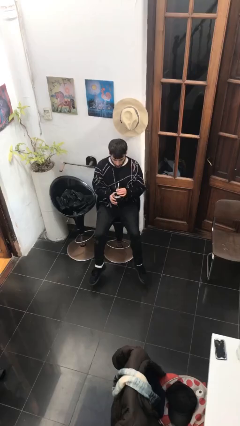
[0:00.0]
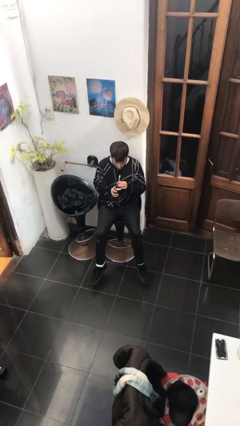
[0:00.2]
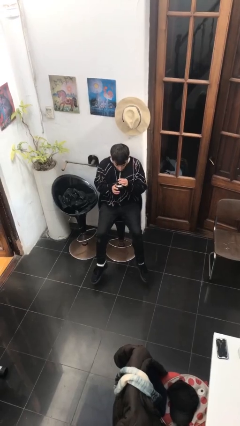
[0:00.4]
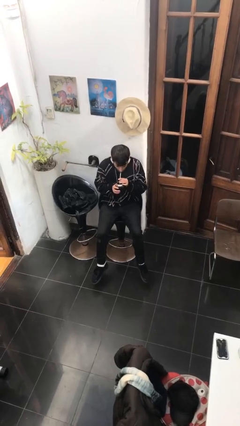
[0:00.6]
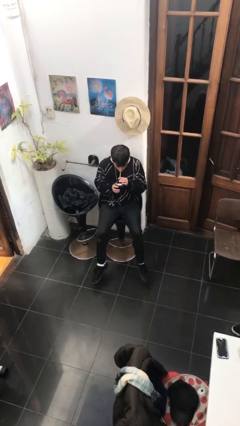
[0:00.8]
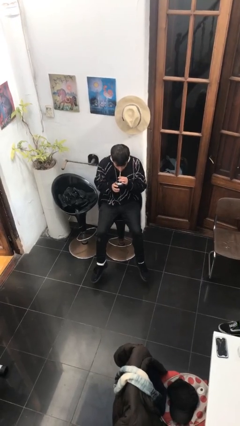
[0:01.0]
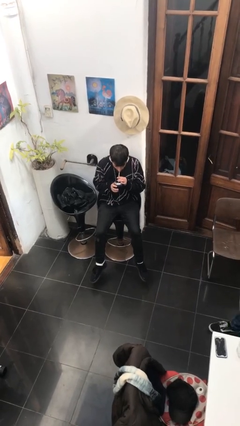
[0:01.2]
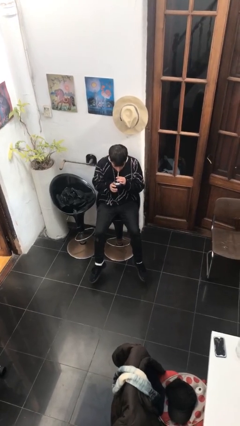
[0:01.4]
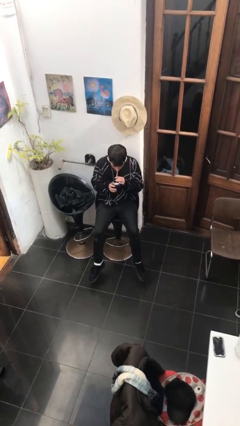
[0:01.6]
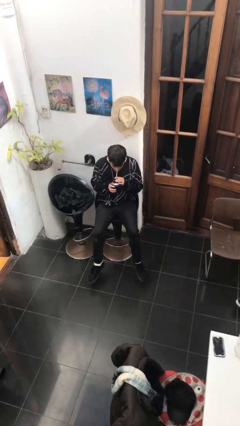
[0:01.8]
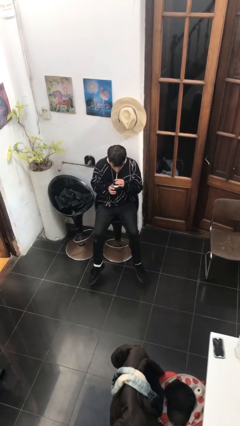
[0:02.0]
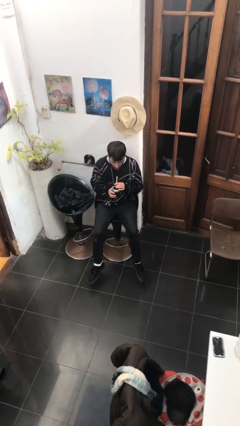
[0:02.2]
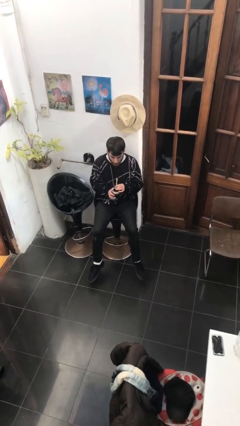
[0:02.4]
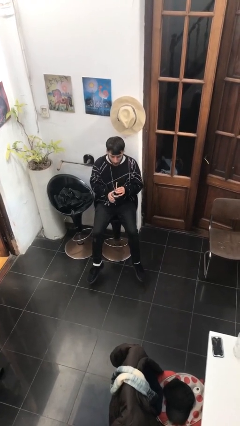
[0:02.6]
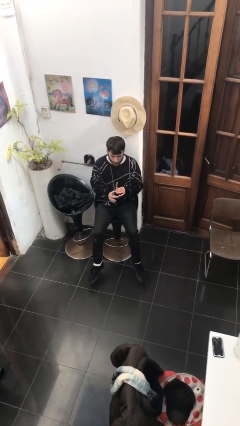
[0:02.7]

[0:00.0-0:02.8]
person drinks from straw

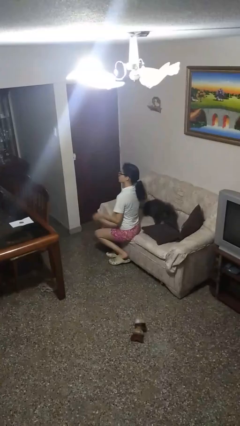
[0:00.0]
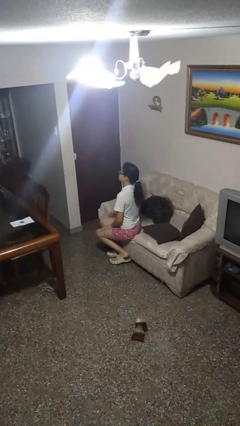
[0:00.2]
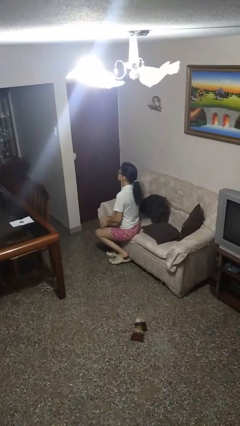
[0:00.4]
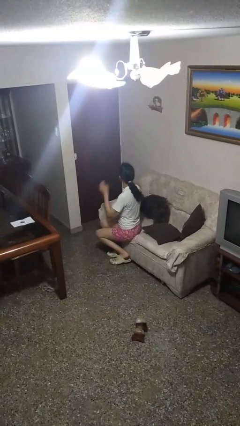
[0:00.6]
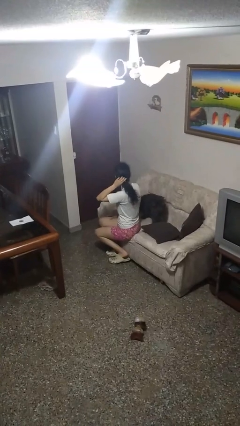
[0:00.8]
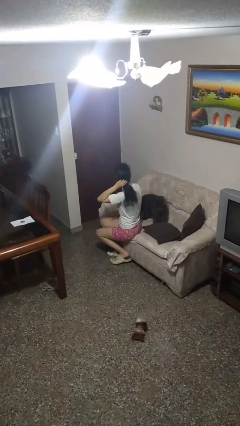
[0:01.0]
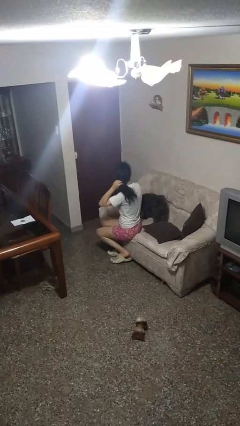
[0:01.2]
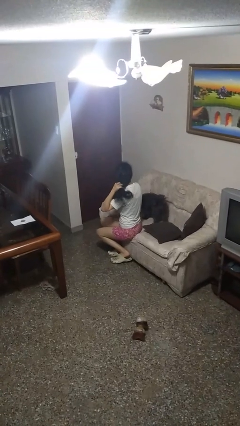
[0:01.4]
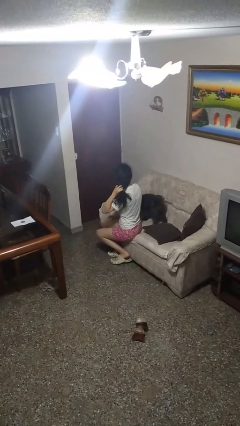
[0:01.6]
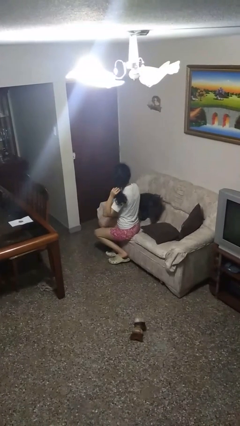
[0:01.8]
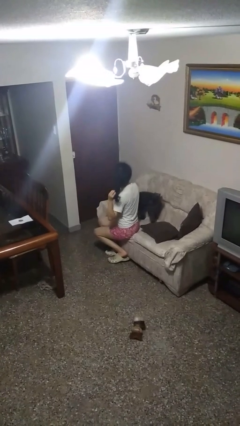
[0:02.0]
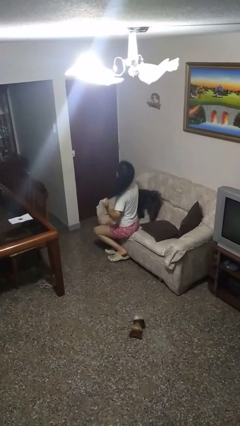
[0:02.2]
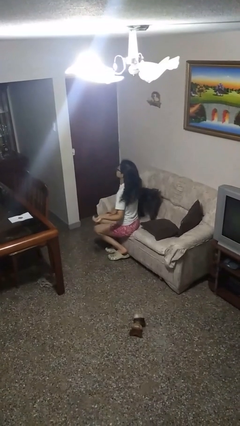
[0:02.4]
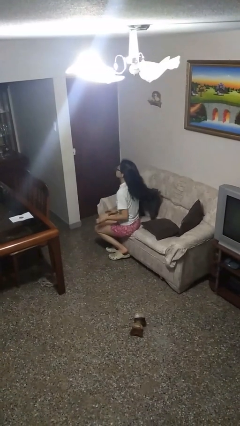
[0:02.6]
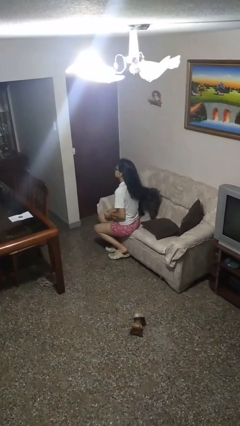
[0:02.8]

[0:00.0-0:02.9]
person takes off hairtie

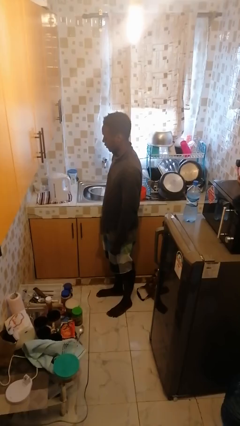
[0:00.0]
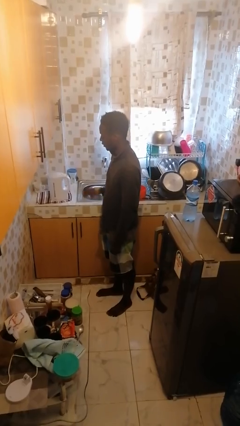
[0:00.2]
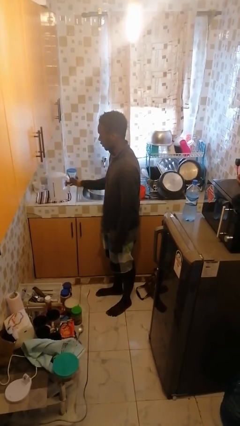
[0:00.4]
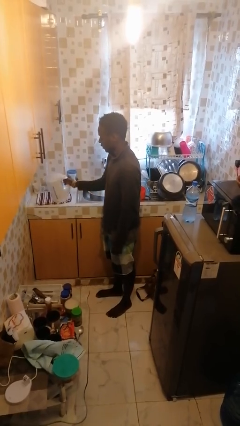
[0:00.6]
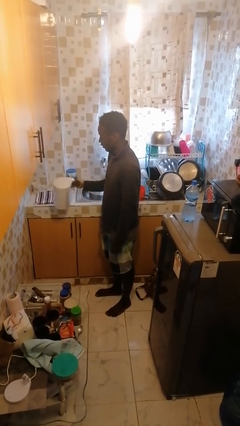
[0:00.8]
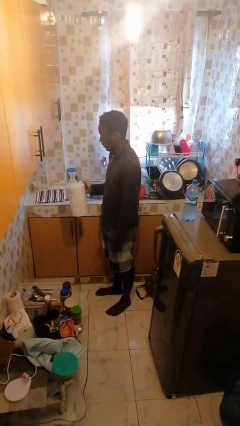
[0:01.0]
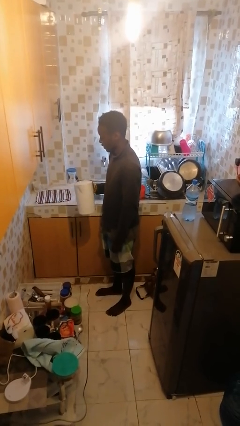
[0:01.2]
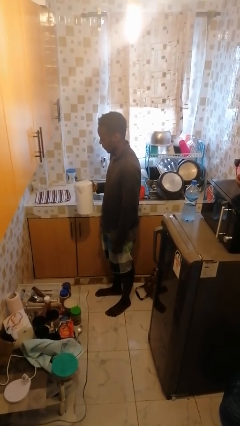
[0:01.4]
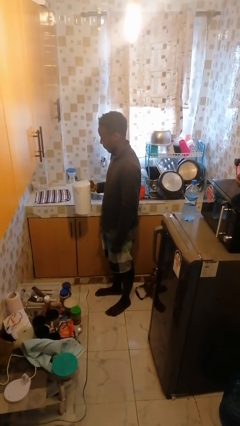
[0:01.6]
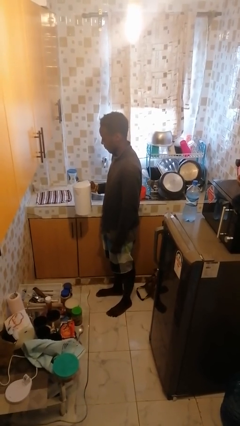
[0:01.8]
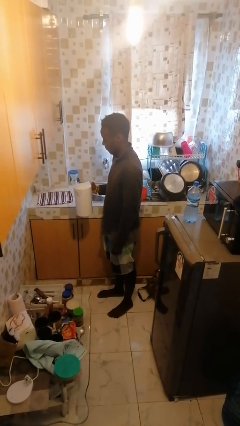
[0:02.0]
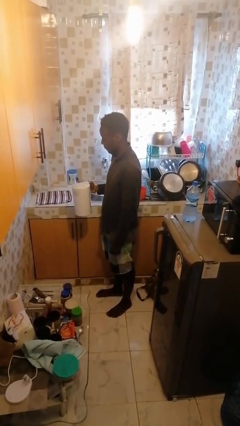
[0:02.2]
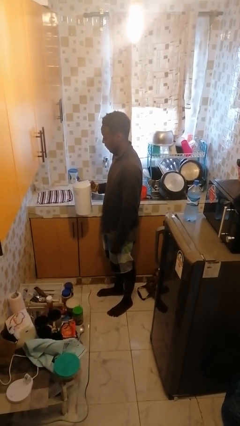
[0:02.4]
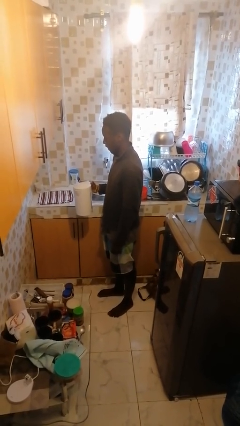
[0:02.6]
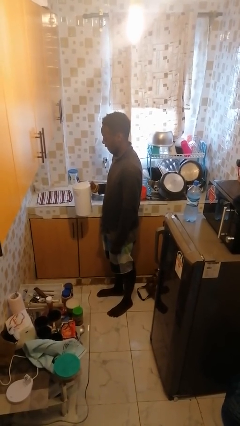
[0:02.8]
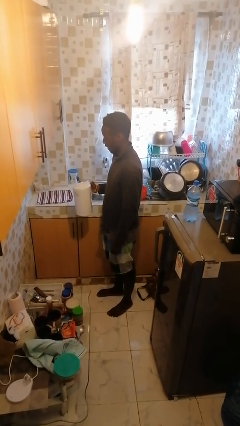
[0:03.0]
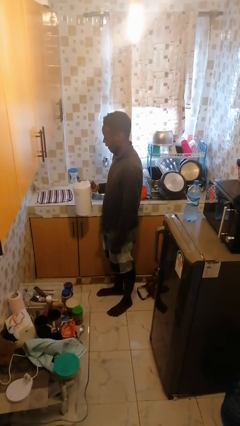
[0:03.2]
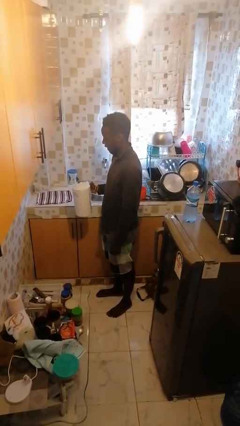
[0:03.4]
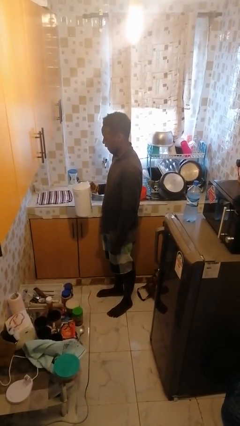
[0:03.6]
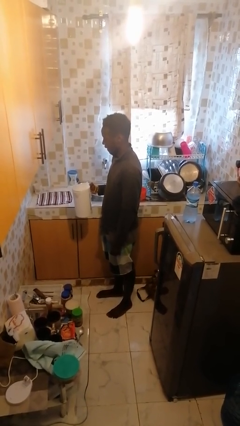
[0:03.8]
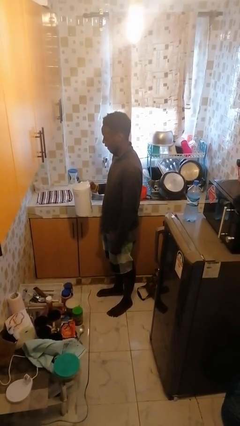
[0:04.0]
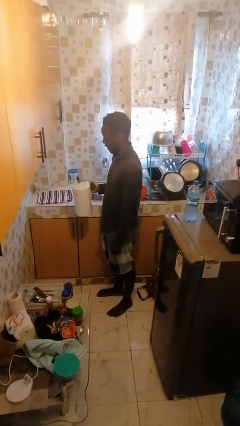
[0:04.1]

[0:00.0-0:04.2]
person picks up object from countertop

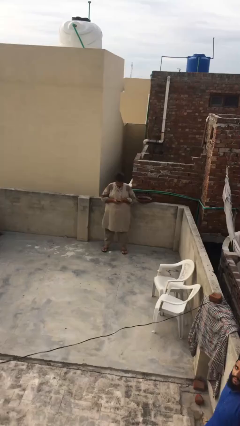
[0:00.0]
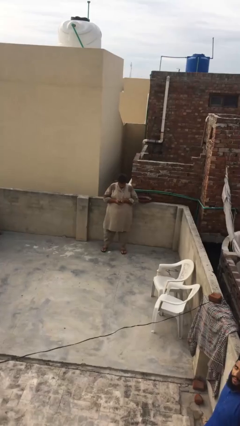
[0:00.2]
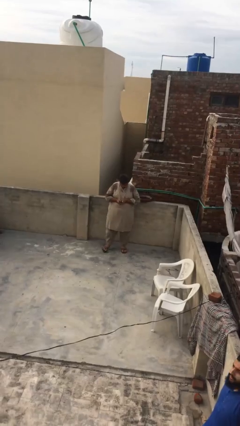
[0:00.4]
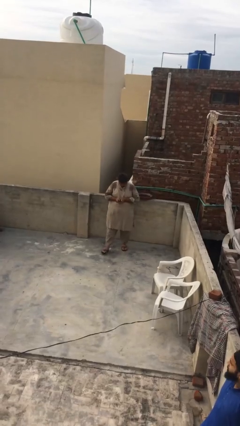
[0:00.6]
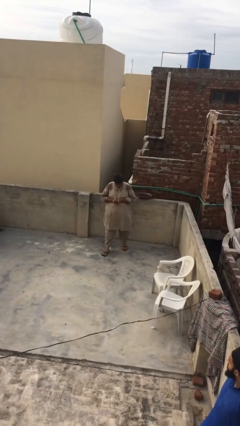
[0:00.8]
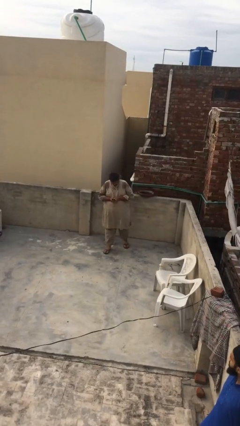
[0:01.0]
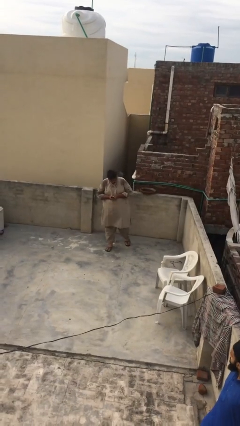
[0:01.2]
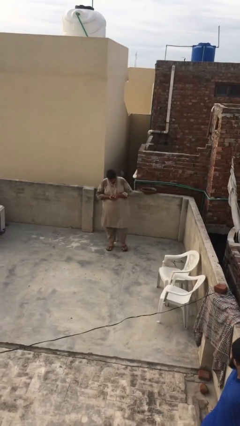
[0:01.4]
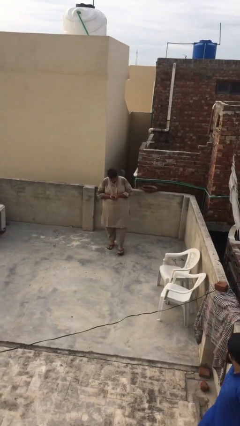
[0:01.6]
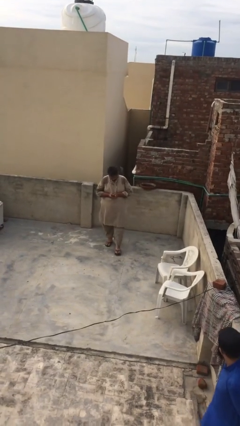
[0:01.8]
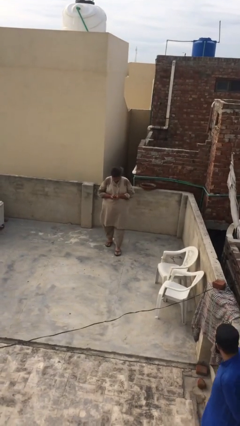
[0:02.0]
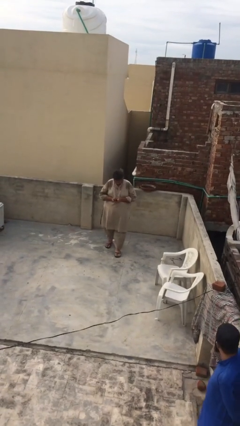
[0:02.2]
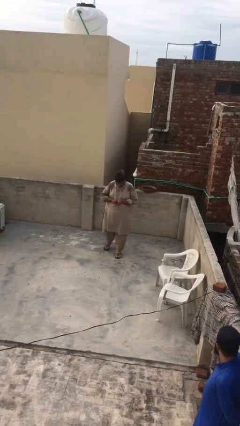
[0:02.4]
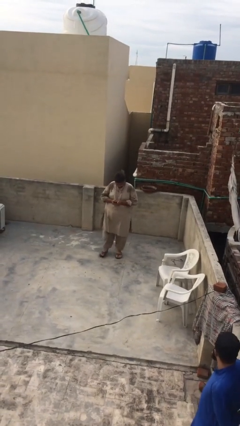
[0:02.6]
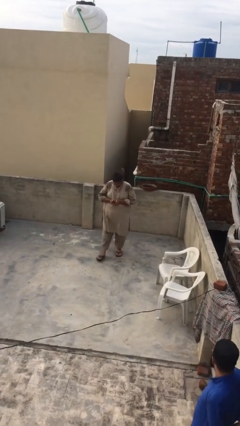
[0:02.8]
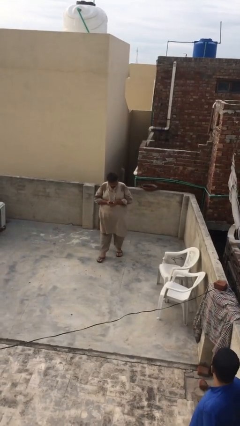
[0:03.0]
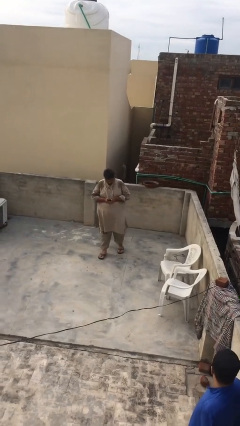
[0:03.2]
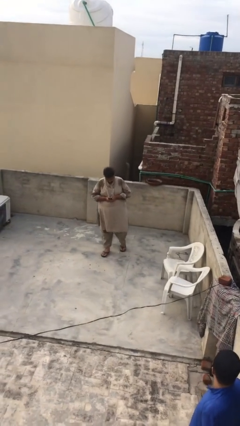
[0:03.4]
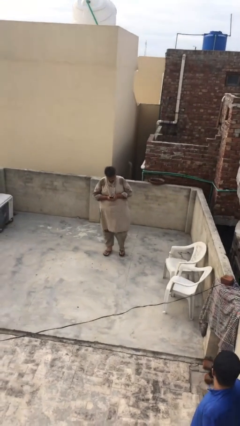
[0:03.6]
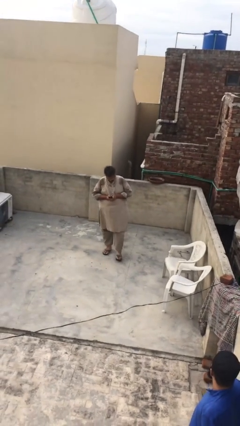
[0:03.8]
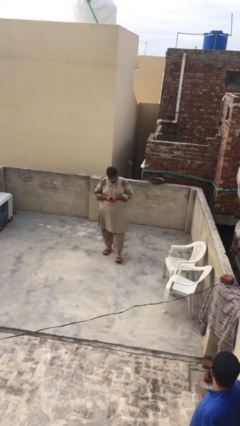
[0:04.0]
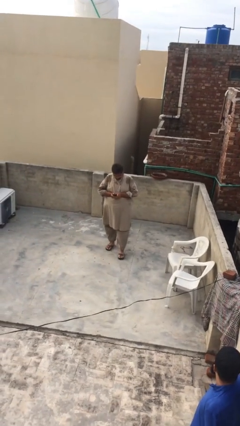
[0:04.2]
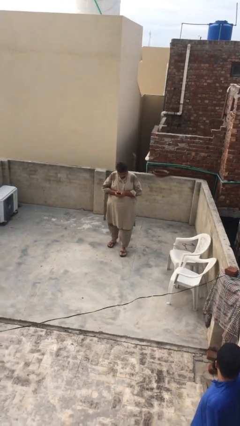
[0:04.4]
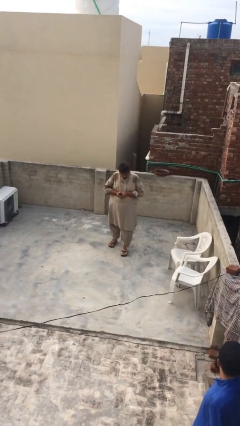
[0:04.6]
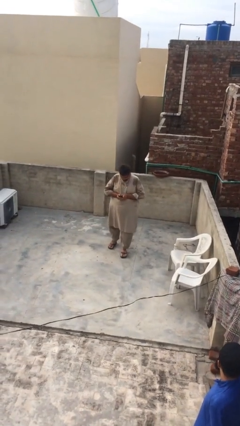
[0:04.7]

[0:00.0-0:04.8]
person texts on phone

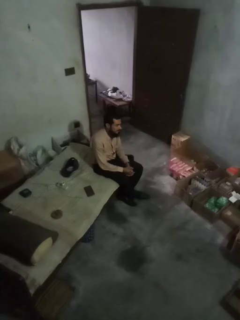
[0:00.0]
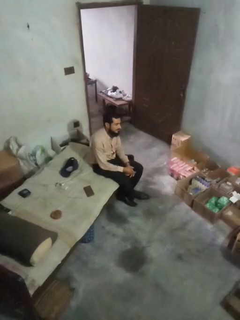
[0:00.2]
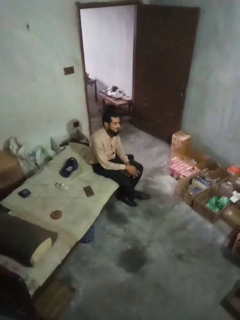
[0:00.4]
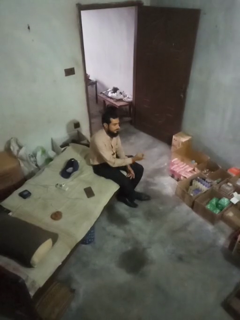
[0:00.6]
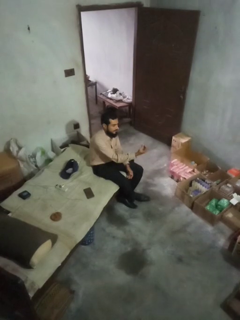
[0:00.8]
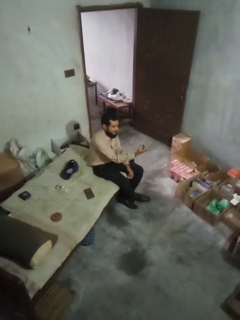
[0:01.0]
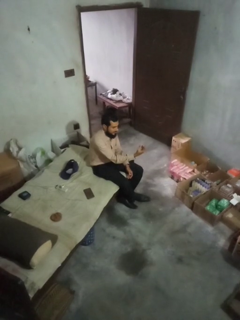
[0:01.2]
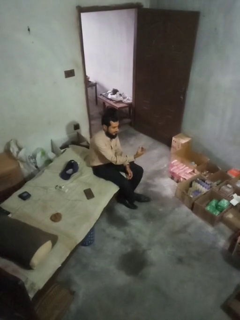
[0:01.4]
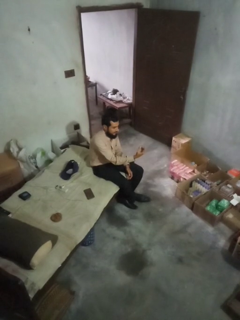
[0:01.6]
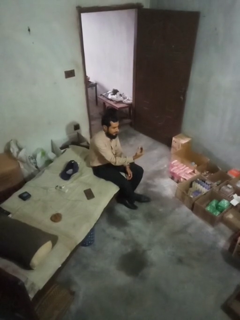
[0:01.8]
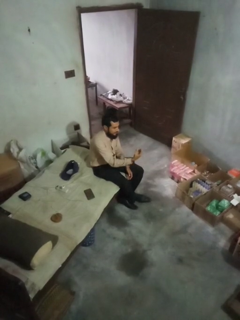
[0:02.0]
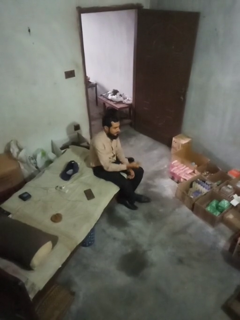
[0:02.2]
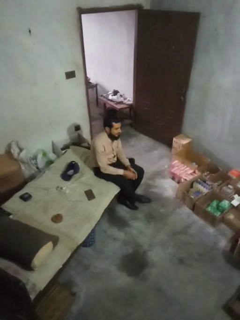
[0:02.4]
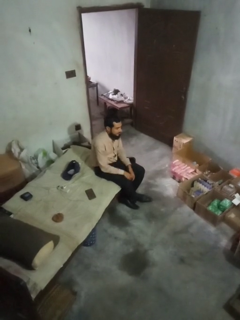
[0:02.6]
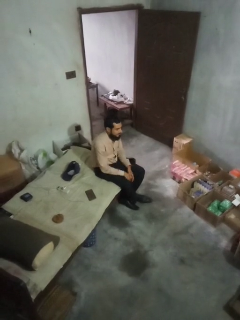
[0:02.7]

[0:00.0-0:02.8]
person gestures come here

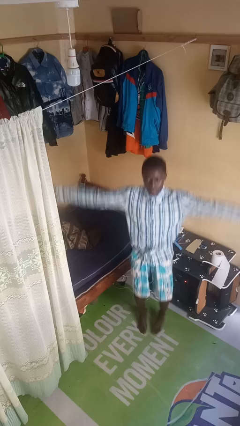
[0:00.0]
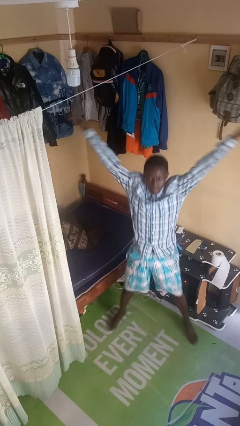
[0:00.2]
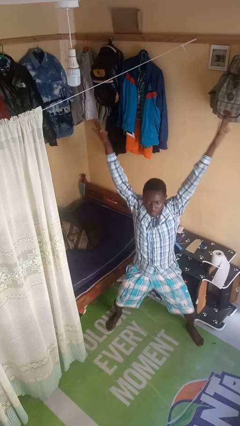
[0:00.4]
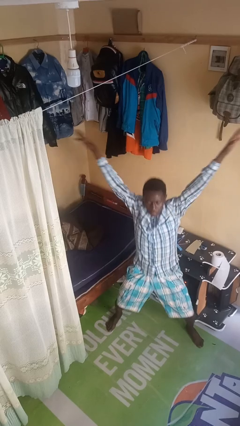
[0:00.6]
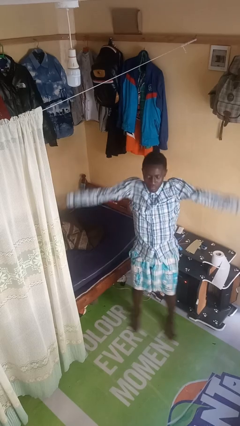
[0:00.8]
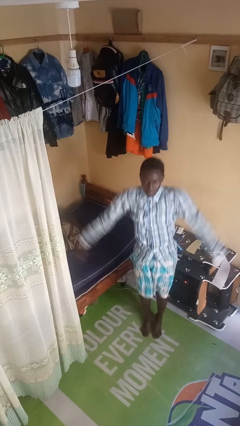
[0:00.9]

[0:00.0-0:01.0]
person exercises with jumping jacks
